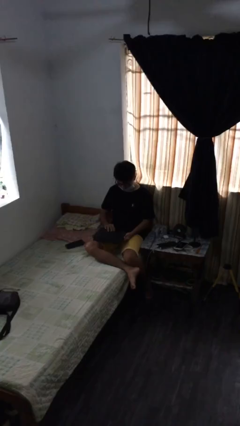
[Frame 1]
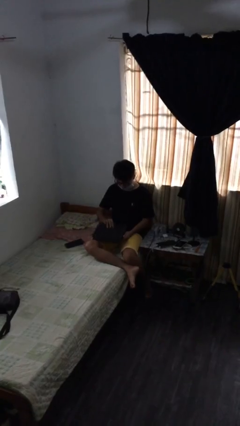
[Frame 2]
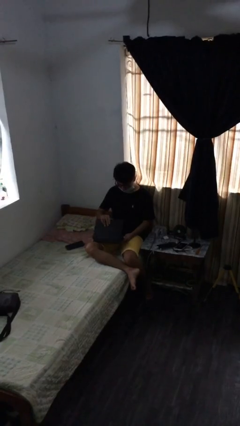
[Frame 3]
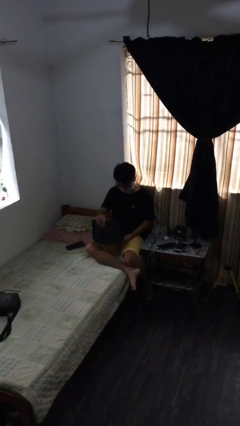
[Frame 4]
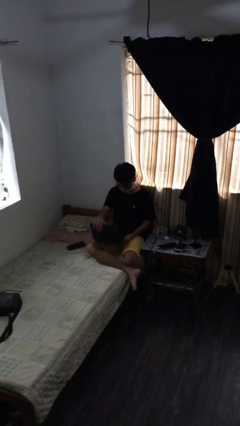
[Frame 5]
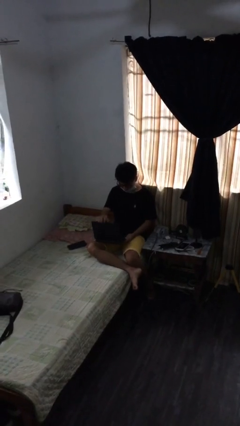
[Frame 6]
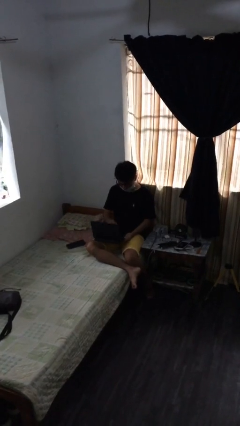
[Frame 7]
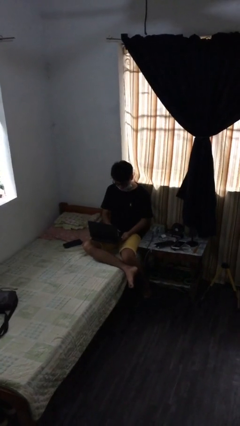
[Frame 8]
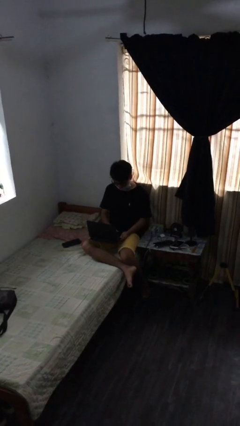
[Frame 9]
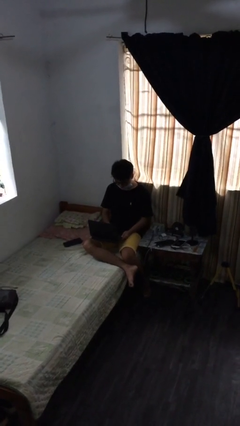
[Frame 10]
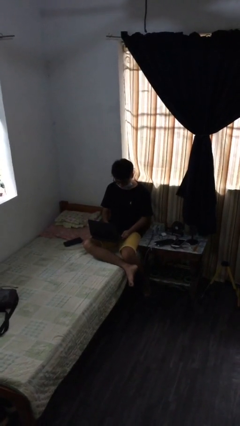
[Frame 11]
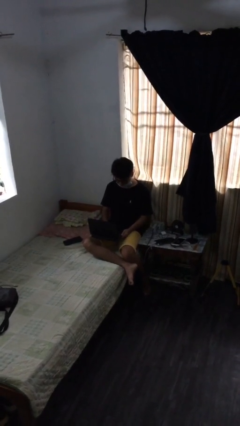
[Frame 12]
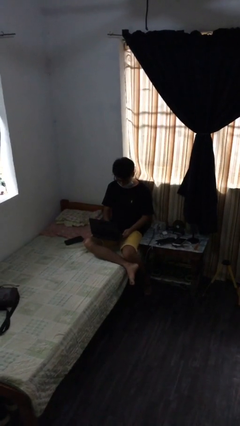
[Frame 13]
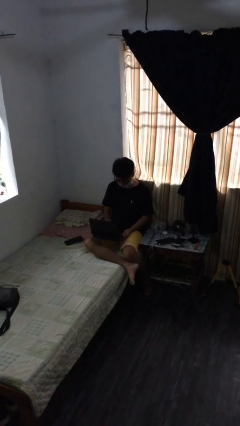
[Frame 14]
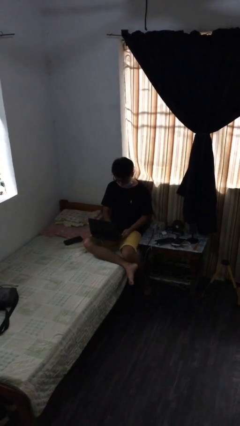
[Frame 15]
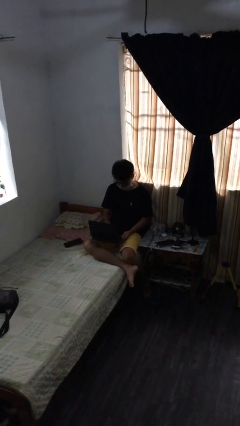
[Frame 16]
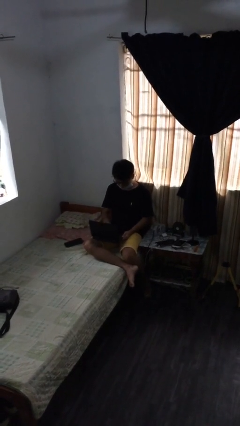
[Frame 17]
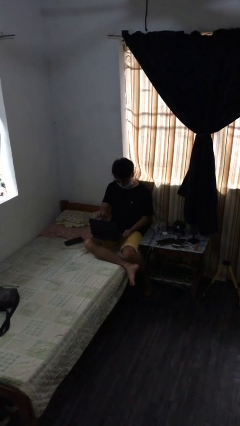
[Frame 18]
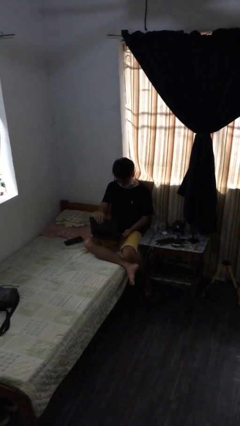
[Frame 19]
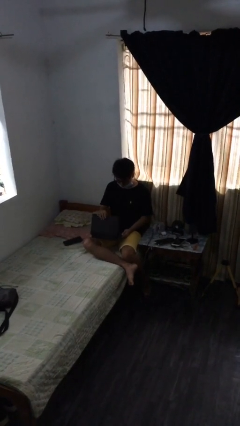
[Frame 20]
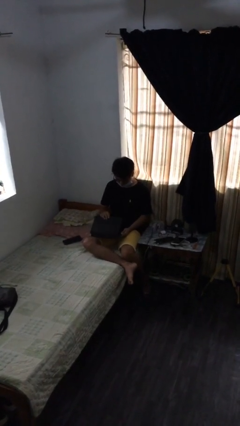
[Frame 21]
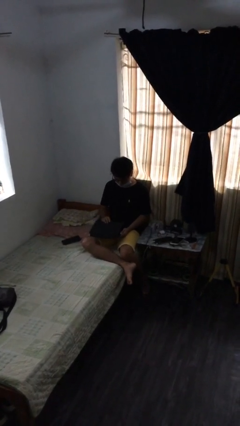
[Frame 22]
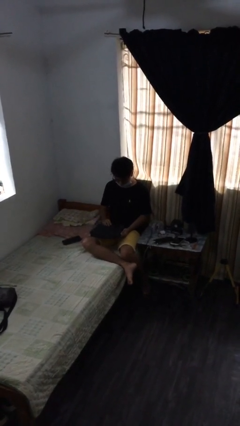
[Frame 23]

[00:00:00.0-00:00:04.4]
person interacts with laptop

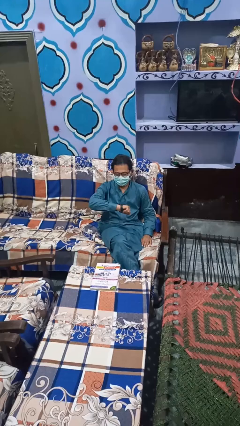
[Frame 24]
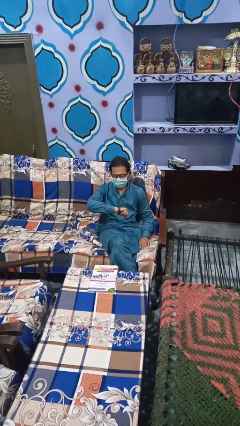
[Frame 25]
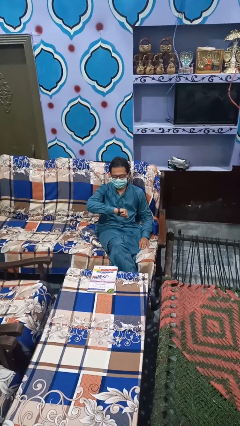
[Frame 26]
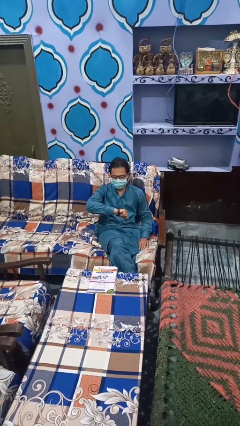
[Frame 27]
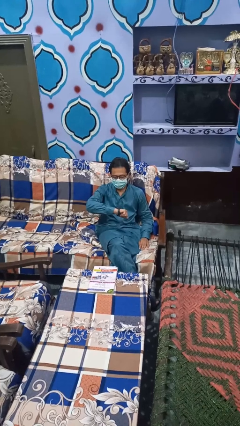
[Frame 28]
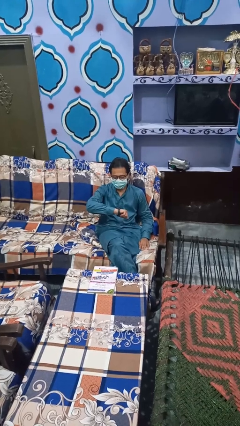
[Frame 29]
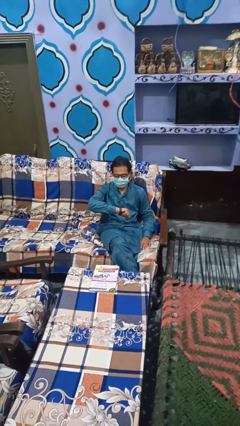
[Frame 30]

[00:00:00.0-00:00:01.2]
person looks at wristwatch

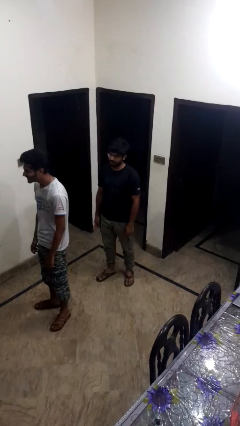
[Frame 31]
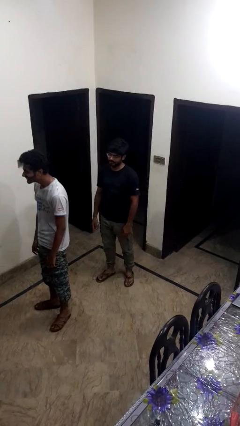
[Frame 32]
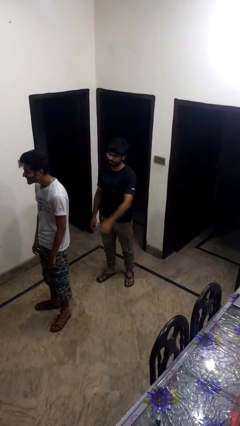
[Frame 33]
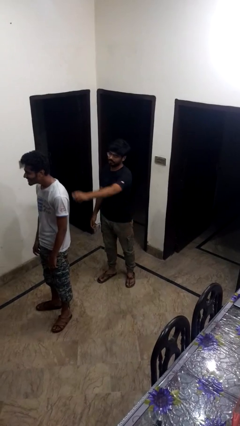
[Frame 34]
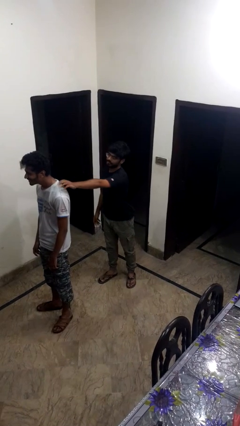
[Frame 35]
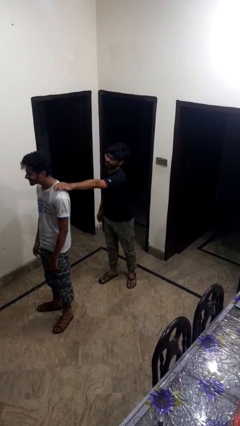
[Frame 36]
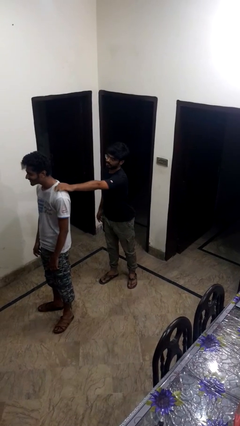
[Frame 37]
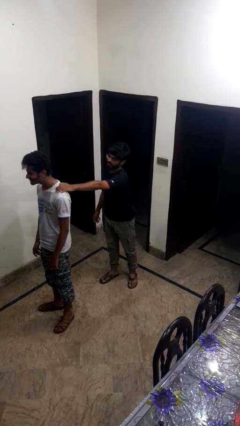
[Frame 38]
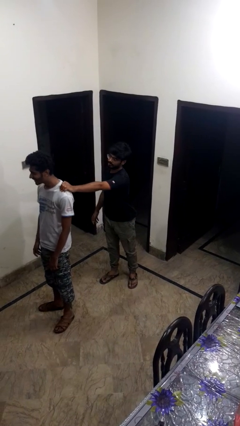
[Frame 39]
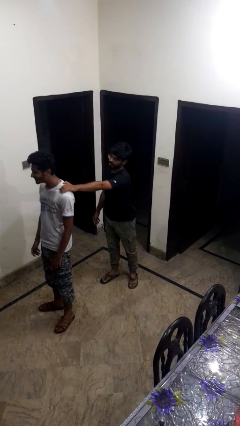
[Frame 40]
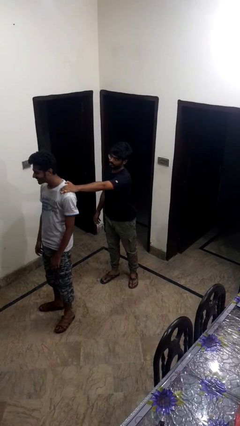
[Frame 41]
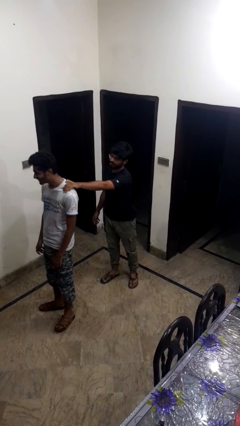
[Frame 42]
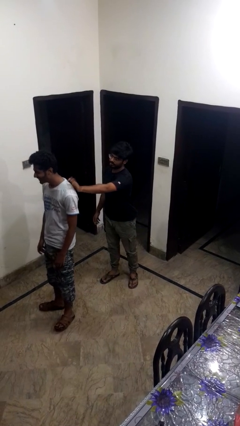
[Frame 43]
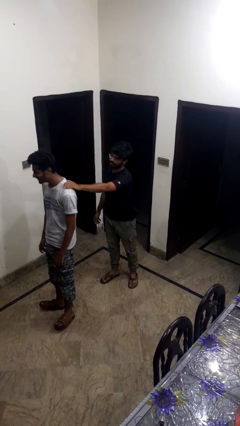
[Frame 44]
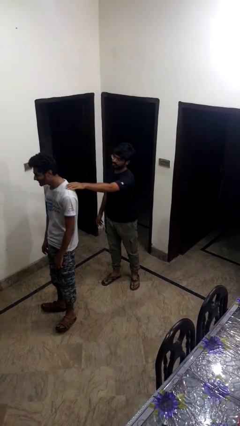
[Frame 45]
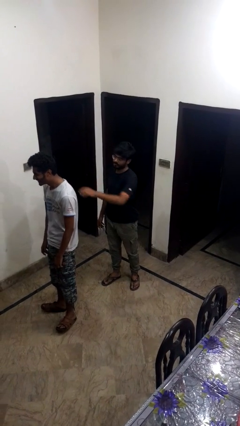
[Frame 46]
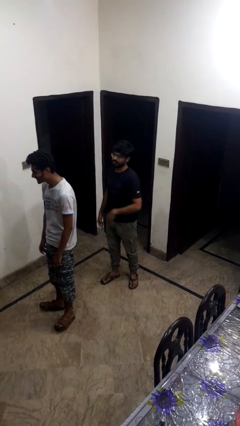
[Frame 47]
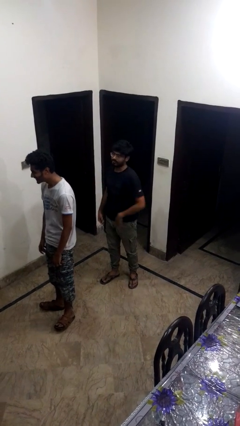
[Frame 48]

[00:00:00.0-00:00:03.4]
person touches back of person

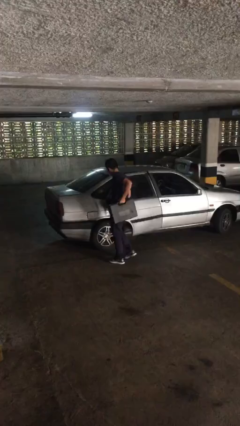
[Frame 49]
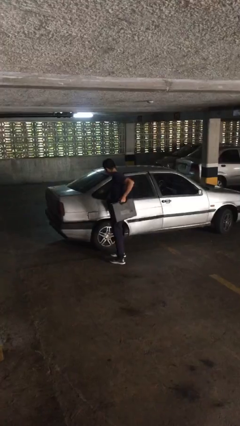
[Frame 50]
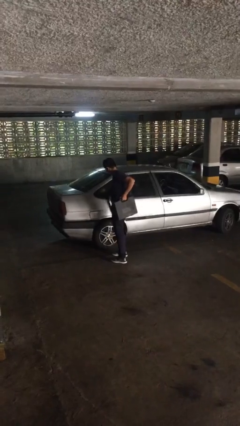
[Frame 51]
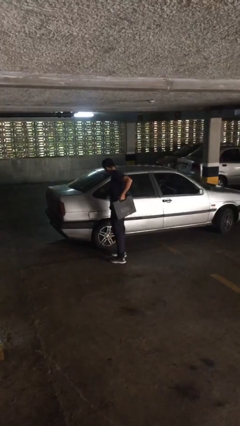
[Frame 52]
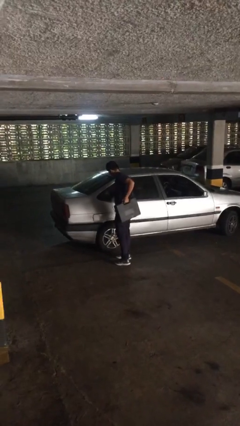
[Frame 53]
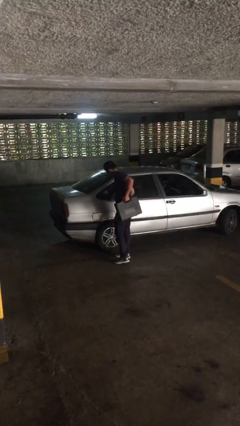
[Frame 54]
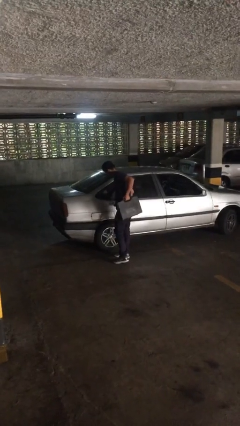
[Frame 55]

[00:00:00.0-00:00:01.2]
person closes car door

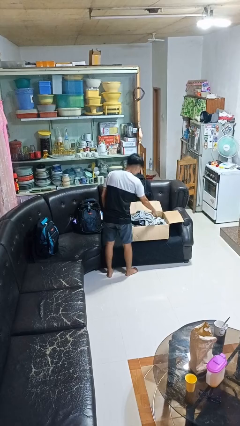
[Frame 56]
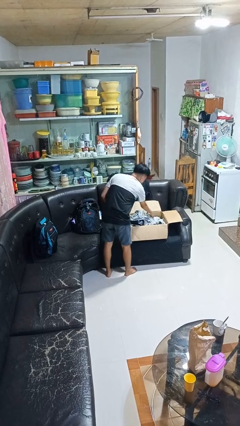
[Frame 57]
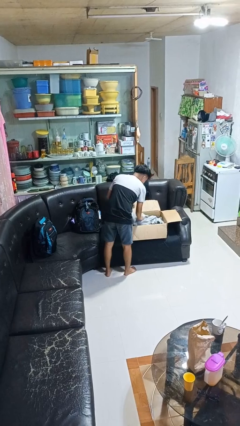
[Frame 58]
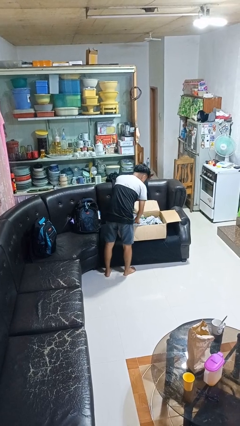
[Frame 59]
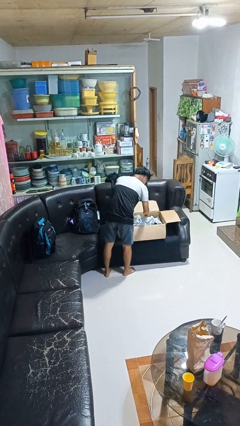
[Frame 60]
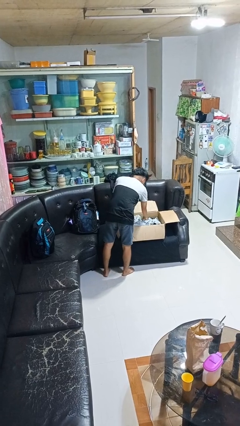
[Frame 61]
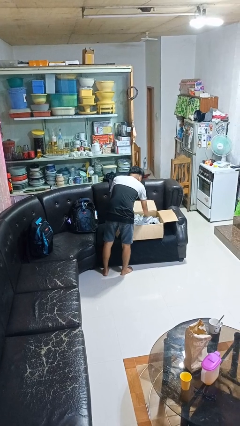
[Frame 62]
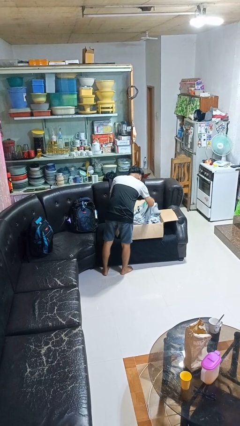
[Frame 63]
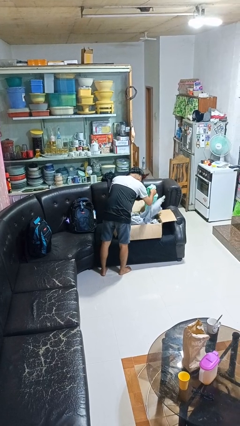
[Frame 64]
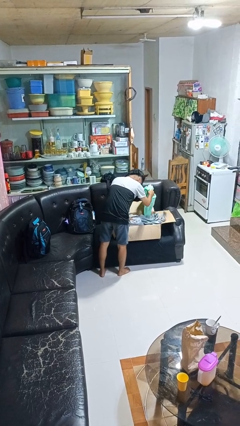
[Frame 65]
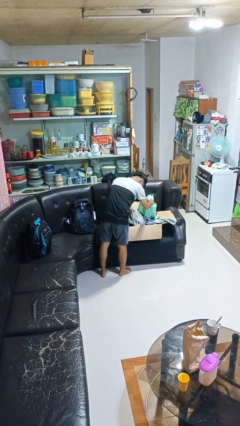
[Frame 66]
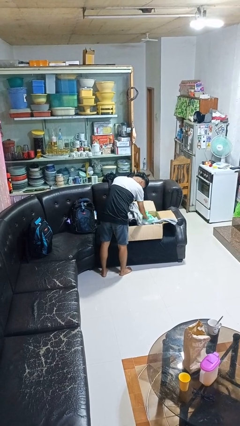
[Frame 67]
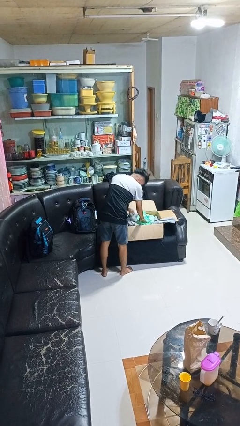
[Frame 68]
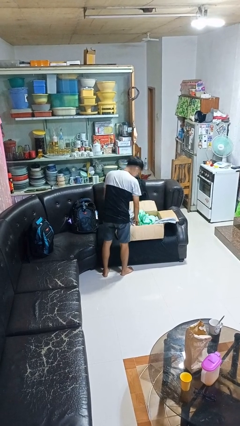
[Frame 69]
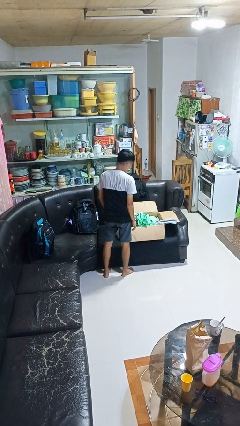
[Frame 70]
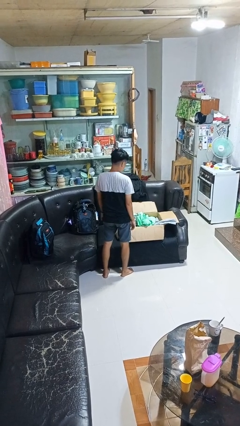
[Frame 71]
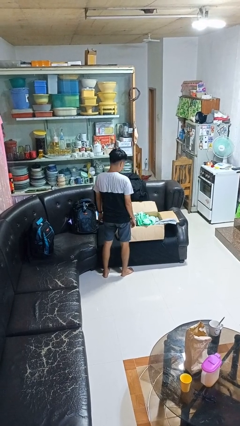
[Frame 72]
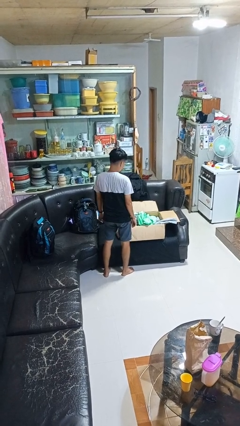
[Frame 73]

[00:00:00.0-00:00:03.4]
person searches in box

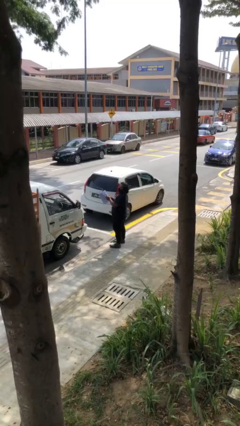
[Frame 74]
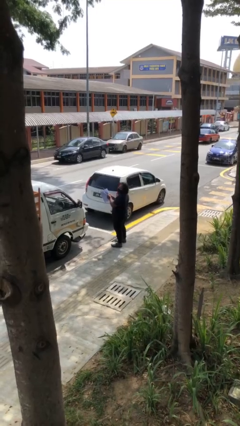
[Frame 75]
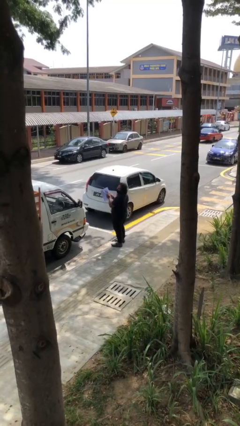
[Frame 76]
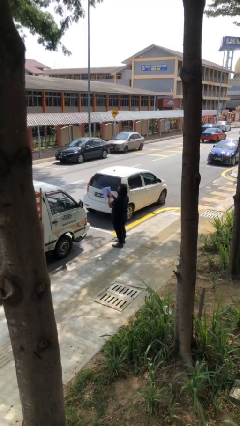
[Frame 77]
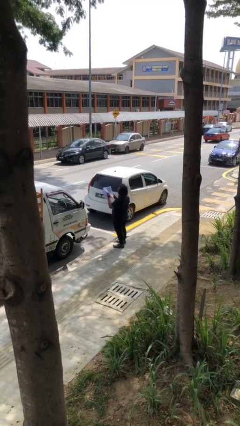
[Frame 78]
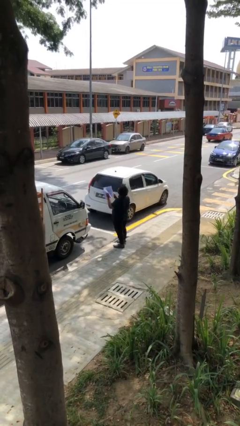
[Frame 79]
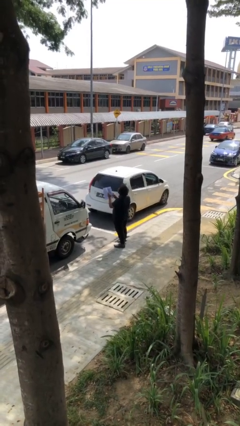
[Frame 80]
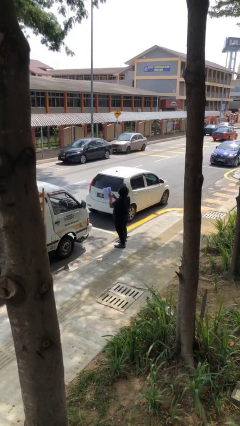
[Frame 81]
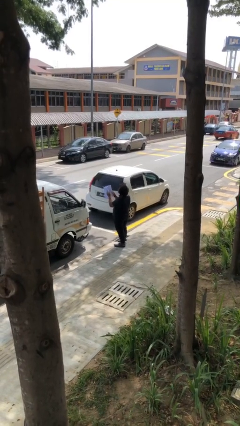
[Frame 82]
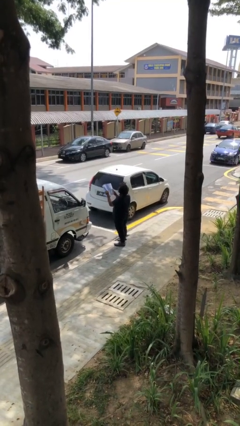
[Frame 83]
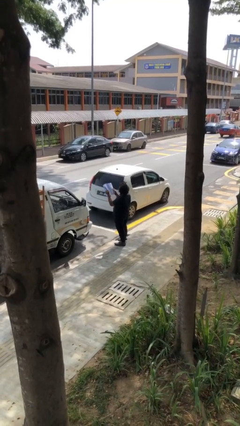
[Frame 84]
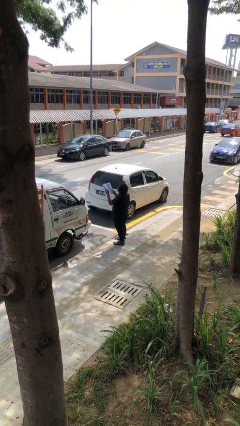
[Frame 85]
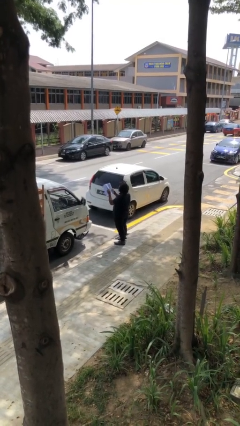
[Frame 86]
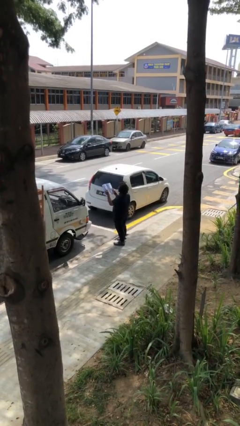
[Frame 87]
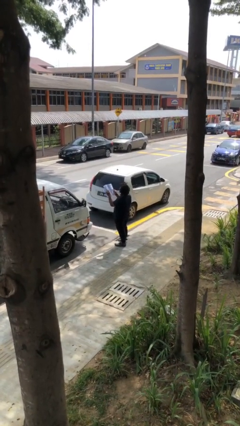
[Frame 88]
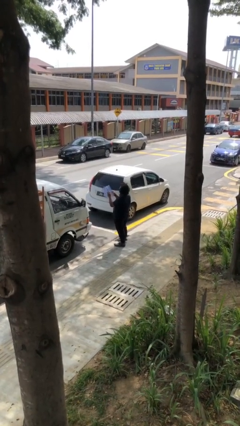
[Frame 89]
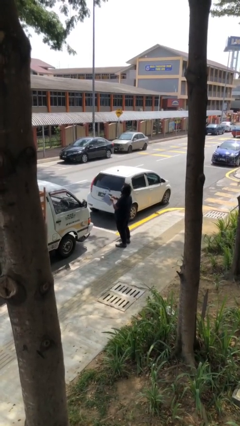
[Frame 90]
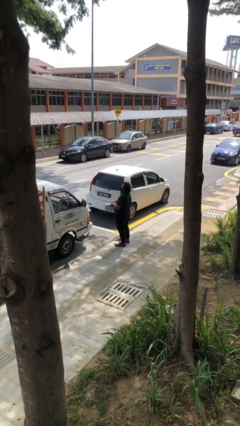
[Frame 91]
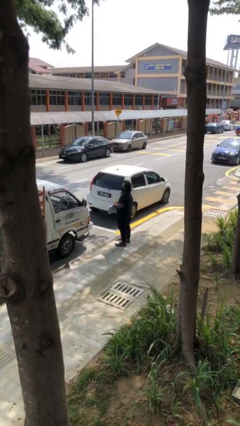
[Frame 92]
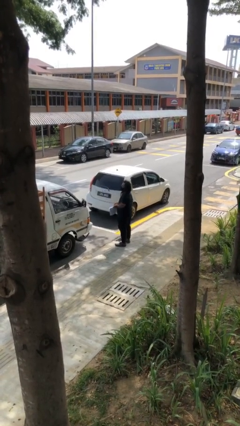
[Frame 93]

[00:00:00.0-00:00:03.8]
person reads document
